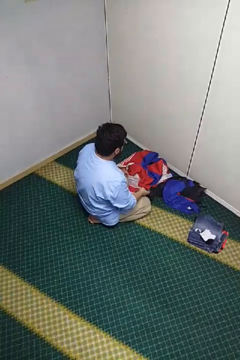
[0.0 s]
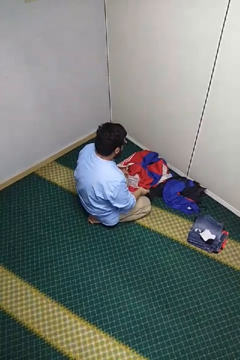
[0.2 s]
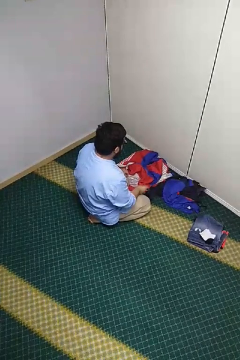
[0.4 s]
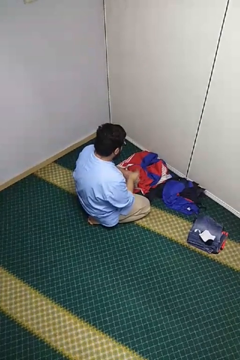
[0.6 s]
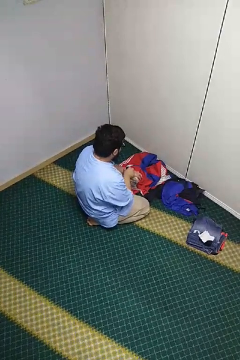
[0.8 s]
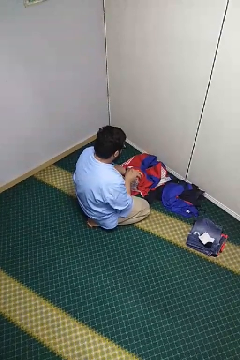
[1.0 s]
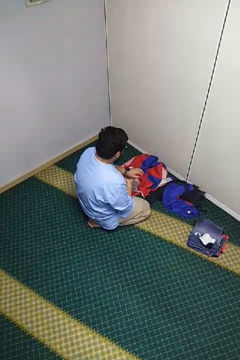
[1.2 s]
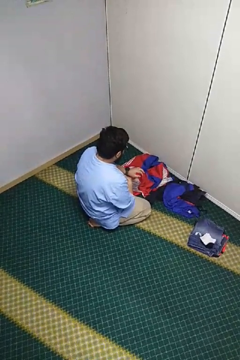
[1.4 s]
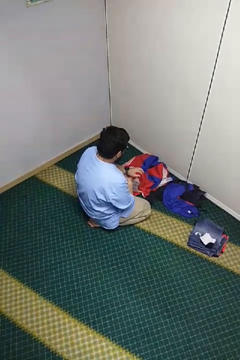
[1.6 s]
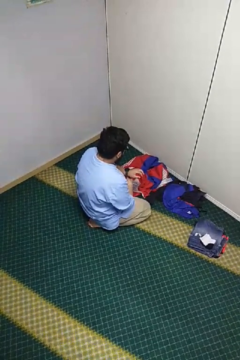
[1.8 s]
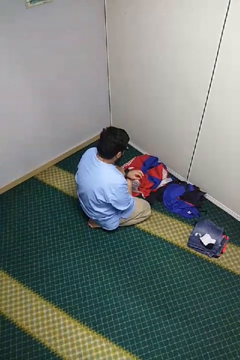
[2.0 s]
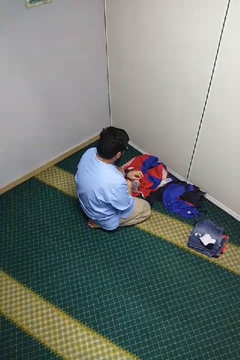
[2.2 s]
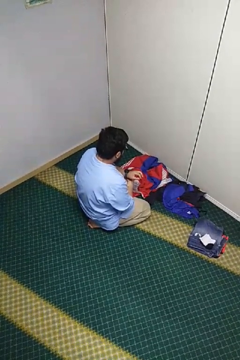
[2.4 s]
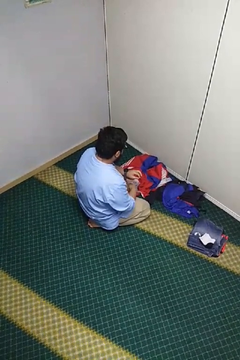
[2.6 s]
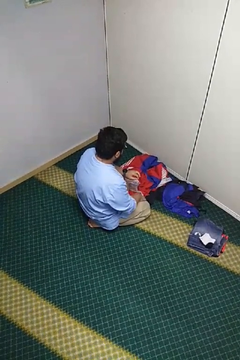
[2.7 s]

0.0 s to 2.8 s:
person puts on wristwatch

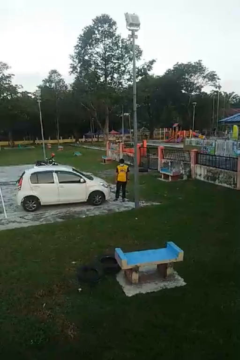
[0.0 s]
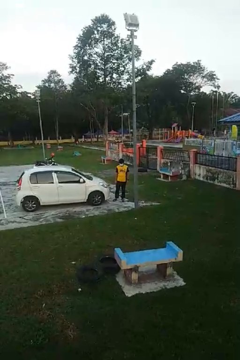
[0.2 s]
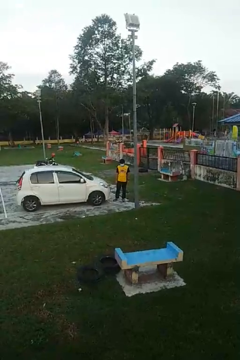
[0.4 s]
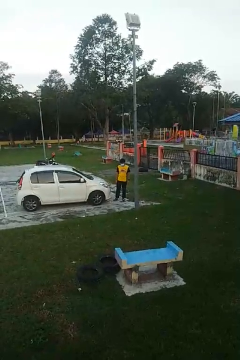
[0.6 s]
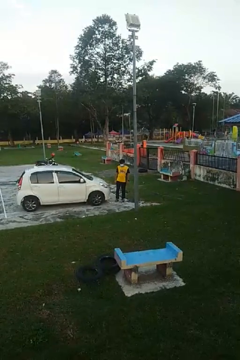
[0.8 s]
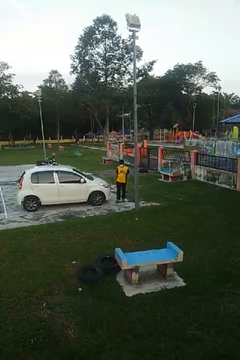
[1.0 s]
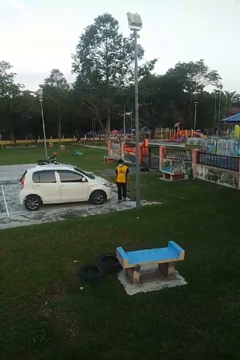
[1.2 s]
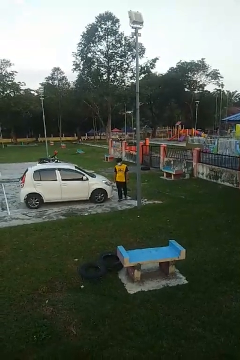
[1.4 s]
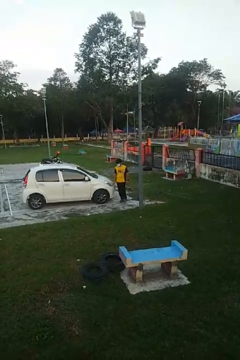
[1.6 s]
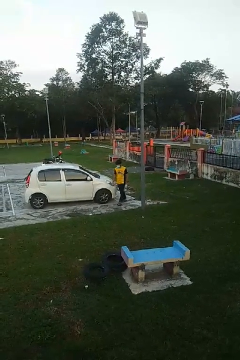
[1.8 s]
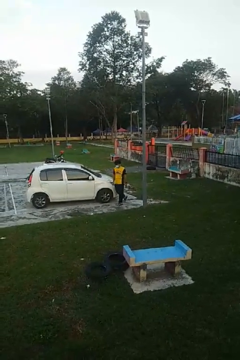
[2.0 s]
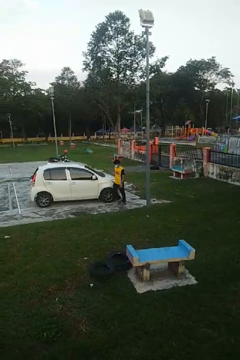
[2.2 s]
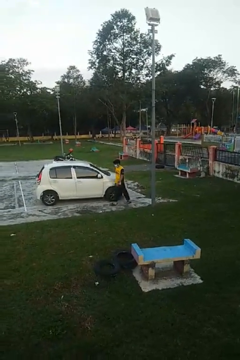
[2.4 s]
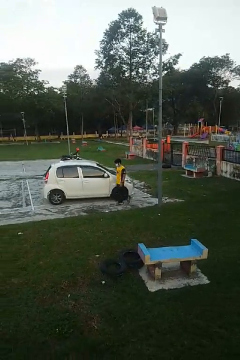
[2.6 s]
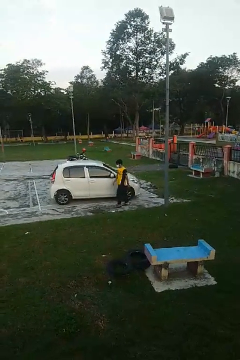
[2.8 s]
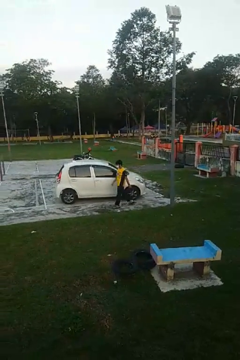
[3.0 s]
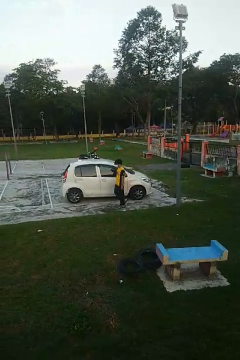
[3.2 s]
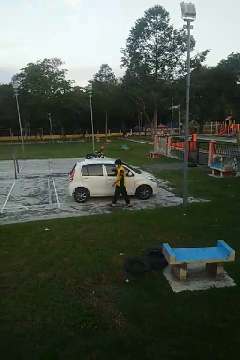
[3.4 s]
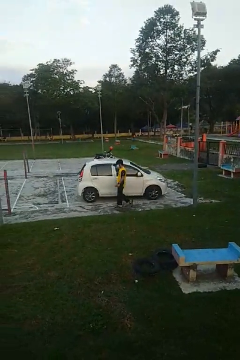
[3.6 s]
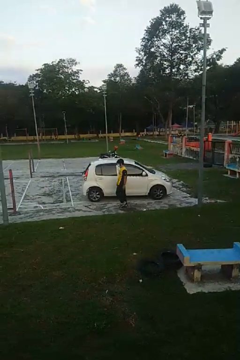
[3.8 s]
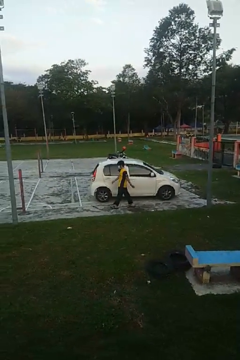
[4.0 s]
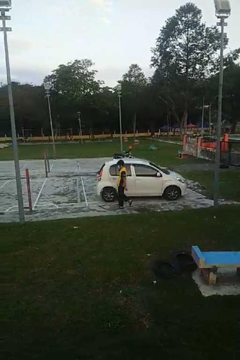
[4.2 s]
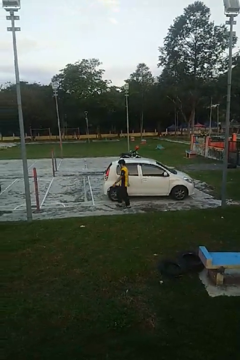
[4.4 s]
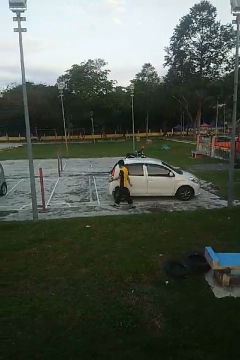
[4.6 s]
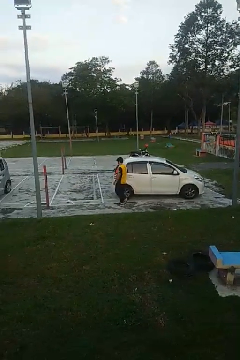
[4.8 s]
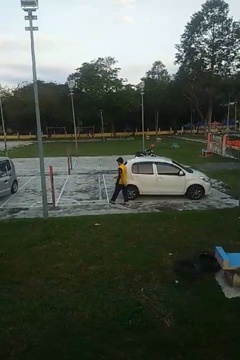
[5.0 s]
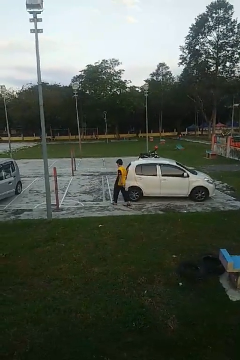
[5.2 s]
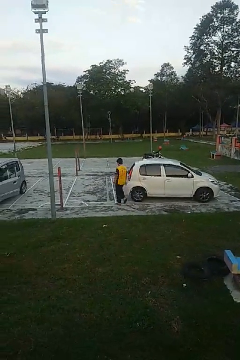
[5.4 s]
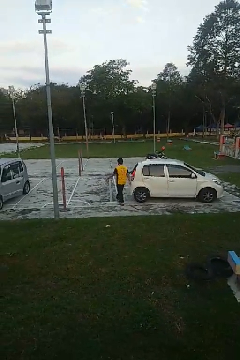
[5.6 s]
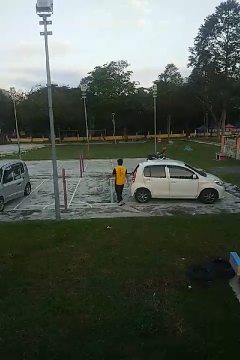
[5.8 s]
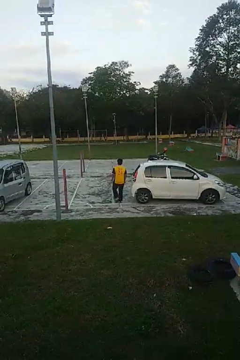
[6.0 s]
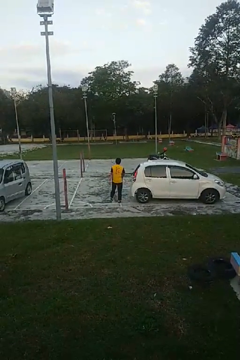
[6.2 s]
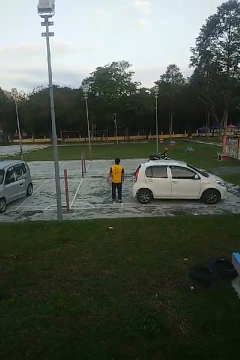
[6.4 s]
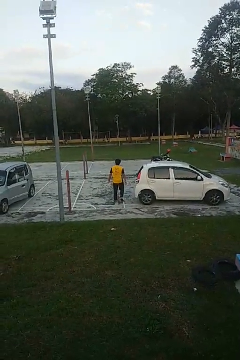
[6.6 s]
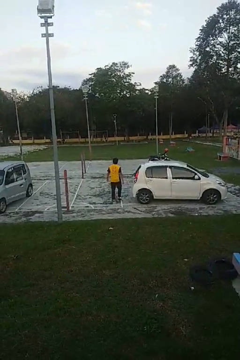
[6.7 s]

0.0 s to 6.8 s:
person walks around car

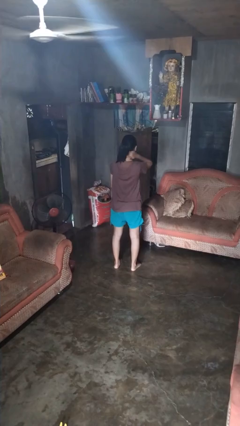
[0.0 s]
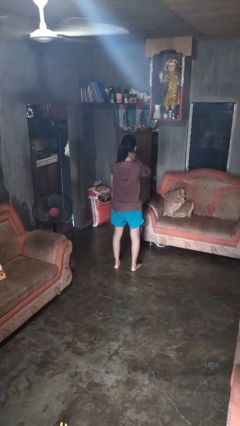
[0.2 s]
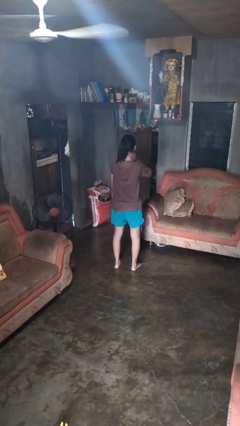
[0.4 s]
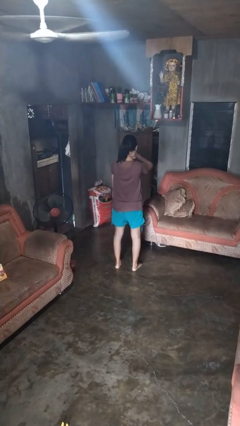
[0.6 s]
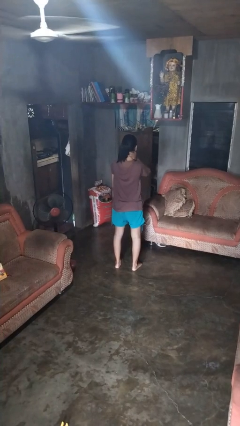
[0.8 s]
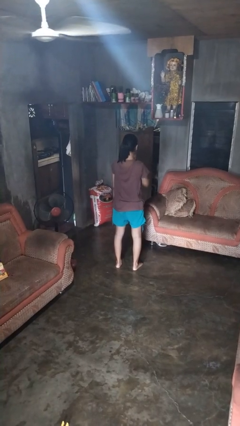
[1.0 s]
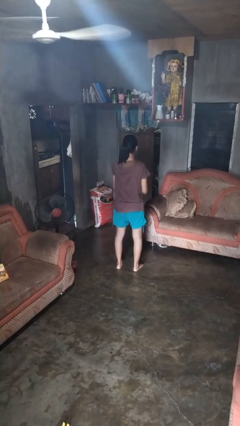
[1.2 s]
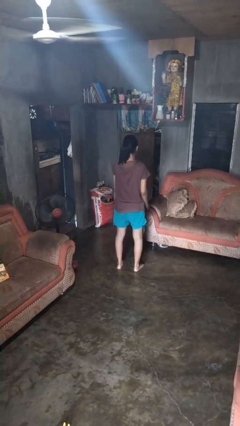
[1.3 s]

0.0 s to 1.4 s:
person rubs neck

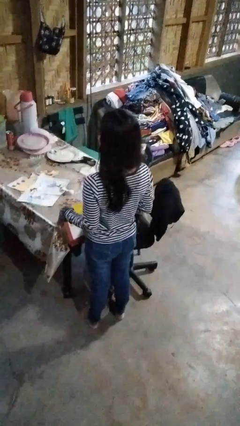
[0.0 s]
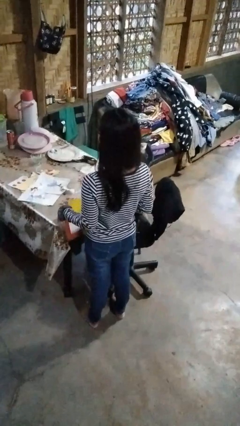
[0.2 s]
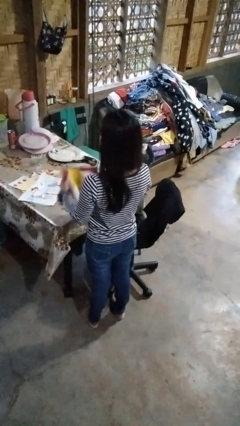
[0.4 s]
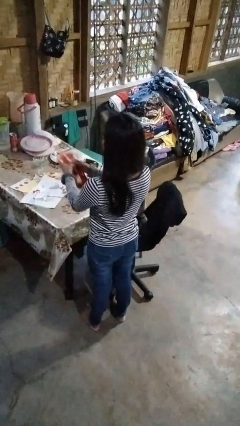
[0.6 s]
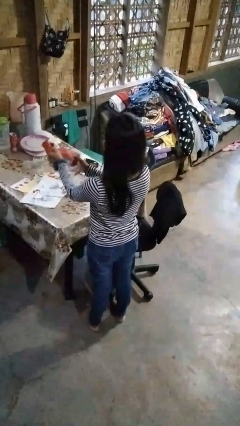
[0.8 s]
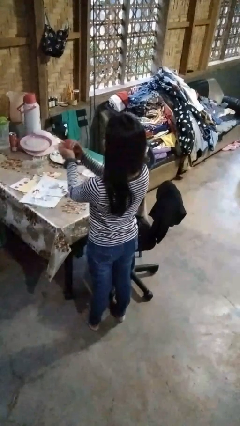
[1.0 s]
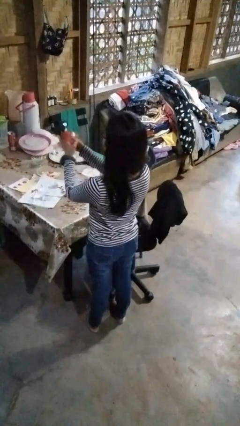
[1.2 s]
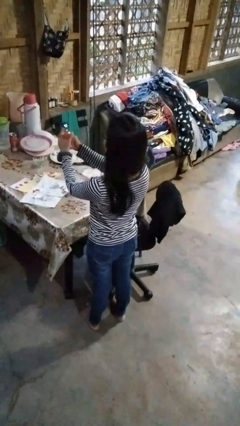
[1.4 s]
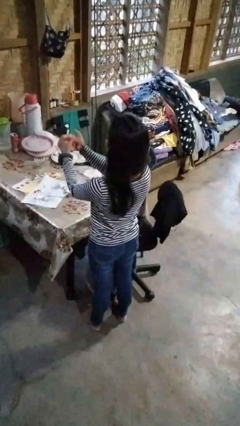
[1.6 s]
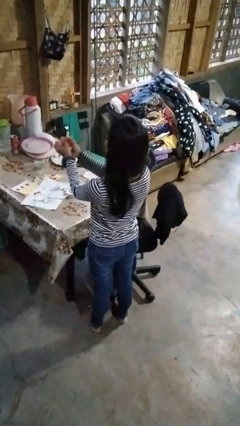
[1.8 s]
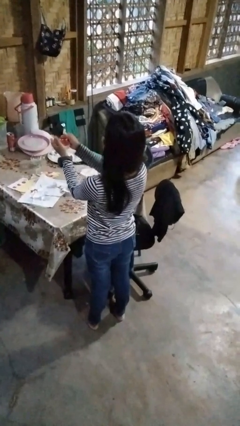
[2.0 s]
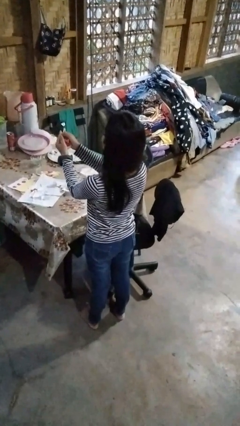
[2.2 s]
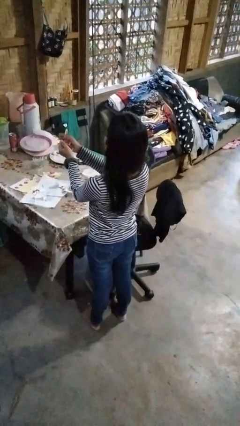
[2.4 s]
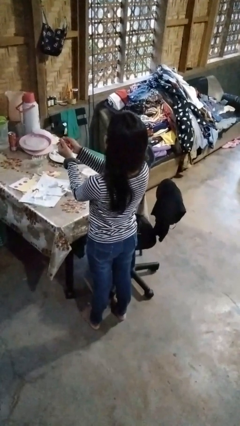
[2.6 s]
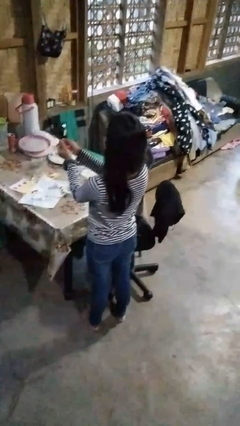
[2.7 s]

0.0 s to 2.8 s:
person crumples paper

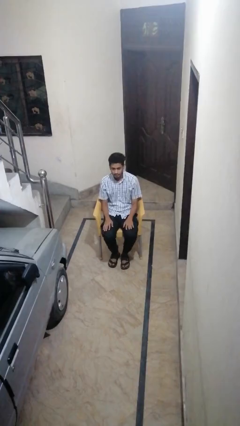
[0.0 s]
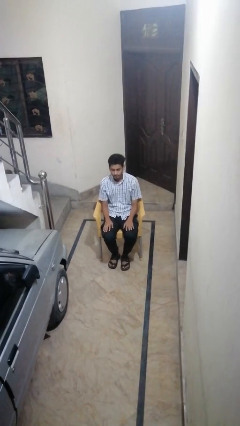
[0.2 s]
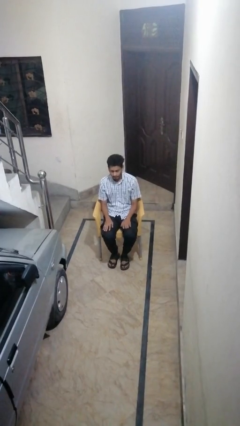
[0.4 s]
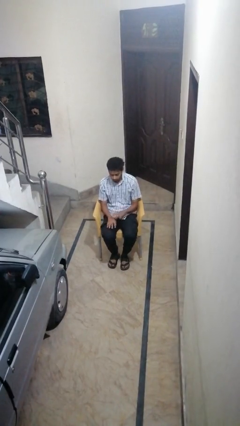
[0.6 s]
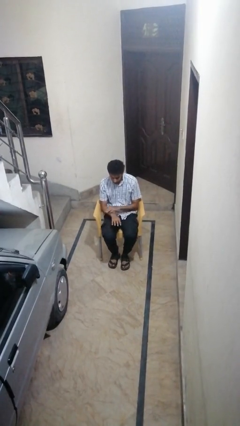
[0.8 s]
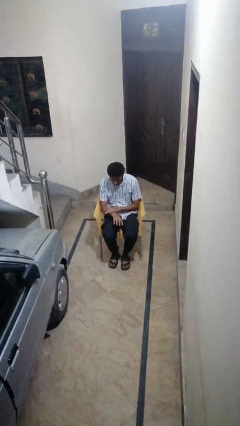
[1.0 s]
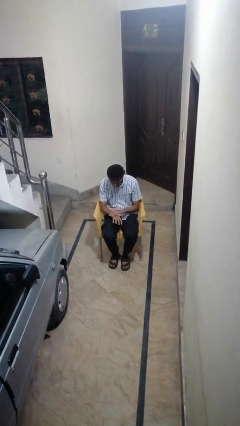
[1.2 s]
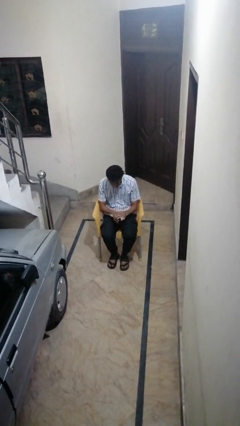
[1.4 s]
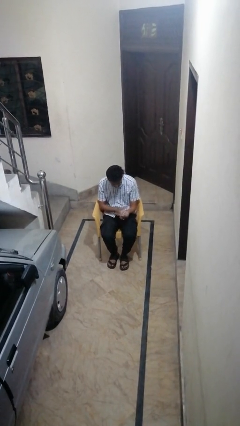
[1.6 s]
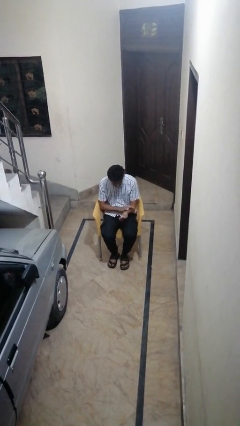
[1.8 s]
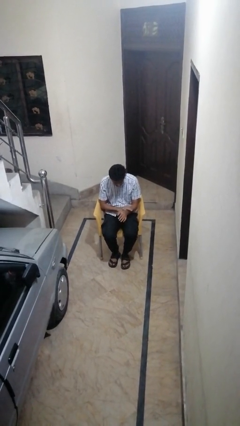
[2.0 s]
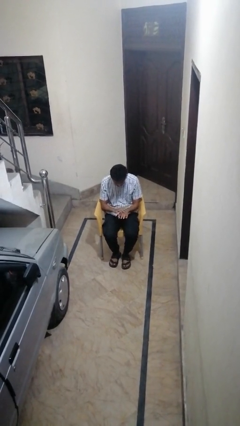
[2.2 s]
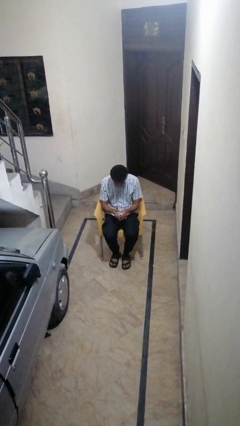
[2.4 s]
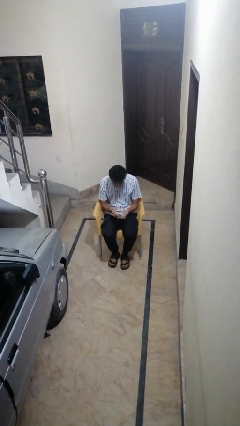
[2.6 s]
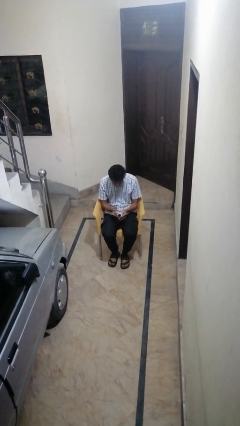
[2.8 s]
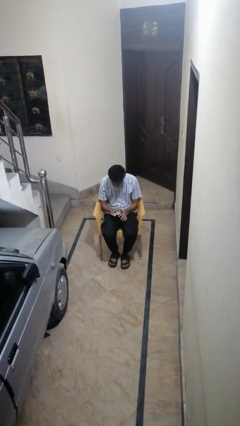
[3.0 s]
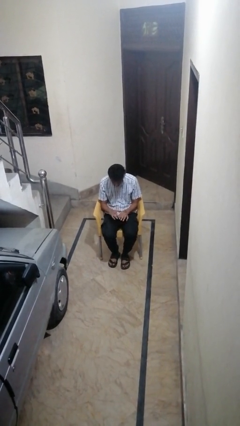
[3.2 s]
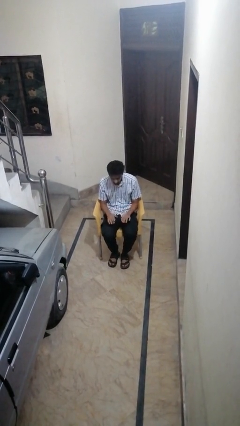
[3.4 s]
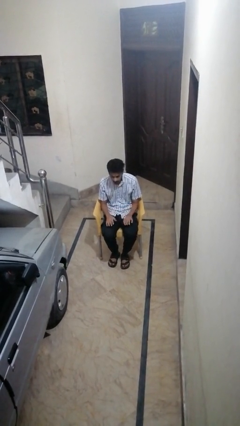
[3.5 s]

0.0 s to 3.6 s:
person looks at hands in lap

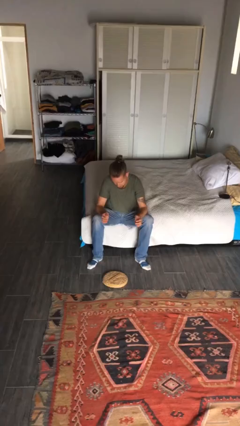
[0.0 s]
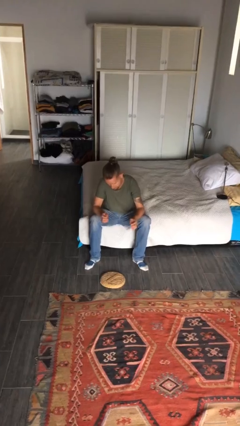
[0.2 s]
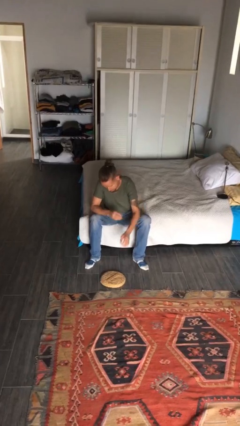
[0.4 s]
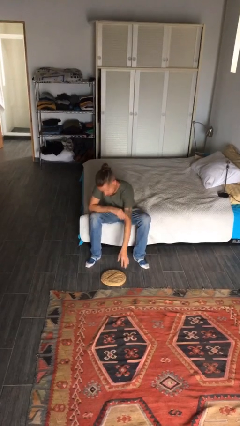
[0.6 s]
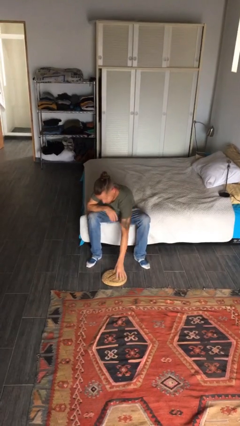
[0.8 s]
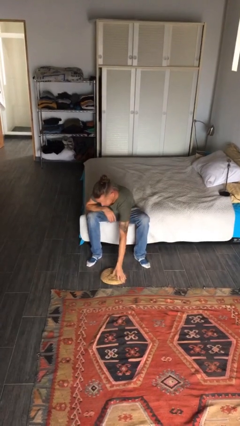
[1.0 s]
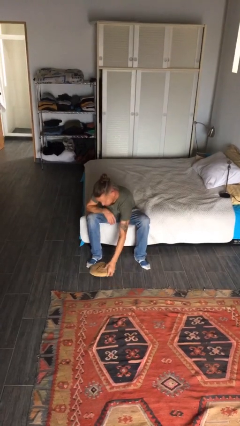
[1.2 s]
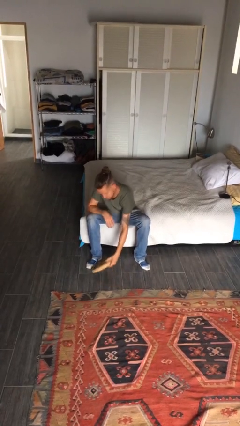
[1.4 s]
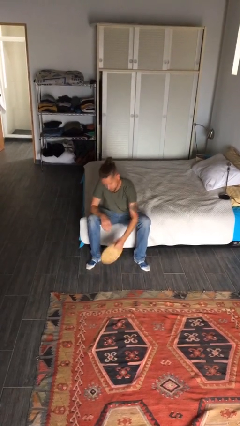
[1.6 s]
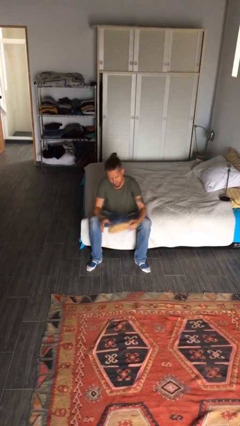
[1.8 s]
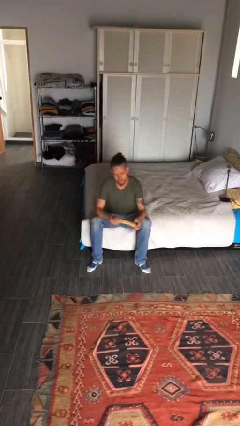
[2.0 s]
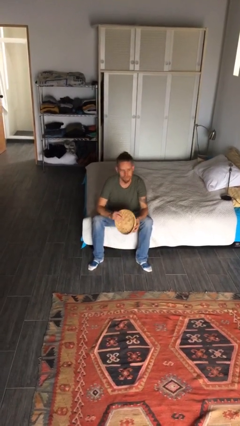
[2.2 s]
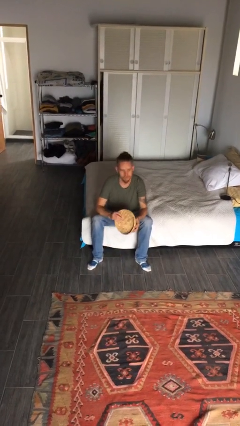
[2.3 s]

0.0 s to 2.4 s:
person picks up object from floor
